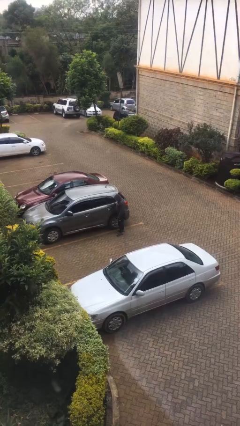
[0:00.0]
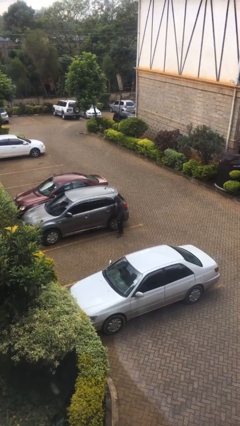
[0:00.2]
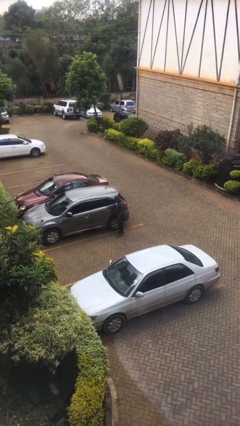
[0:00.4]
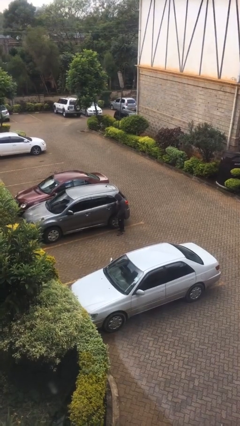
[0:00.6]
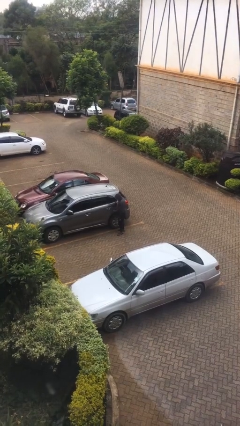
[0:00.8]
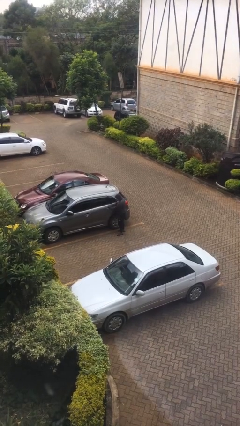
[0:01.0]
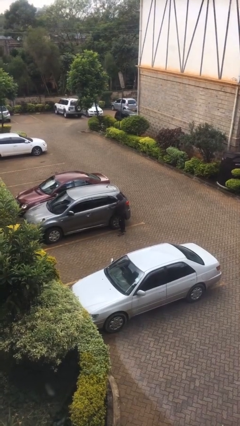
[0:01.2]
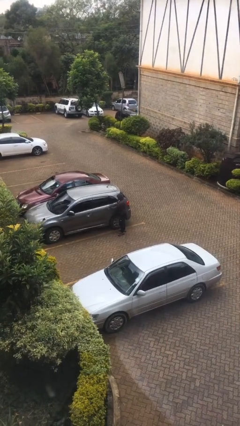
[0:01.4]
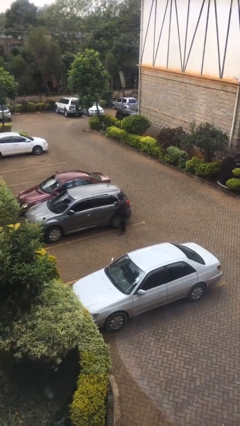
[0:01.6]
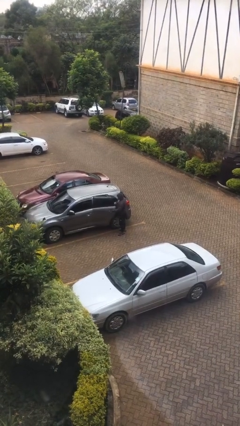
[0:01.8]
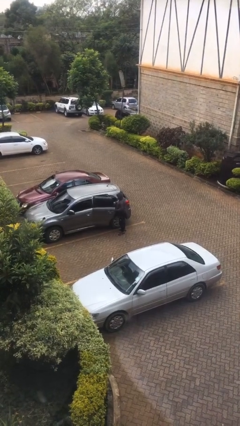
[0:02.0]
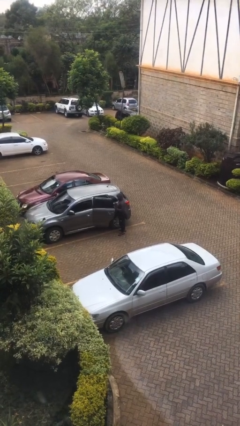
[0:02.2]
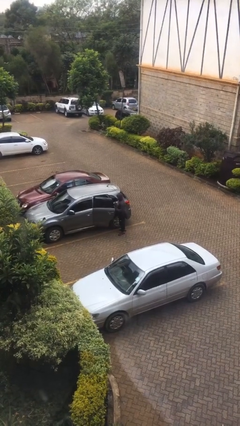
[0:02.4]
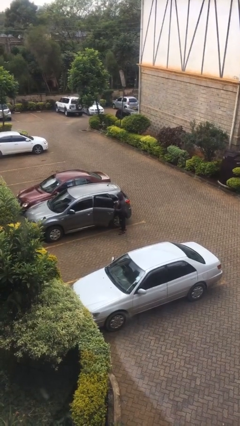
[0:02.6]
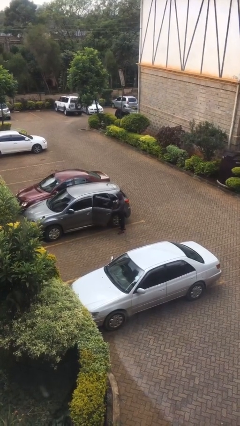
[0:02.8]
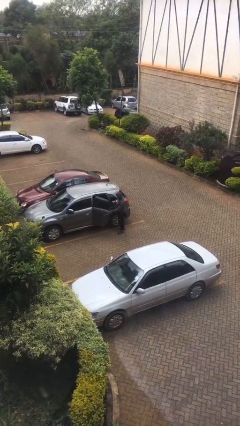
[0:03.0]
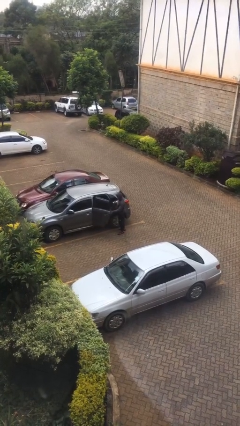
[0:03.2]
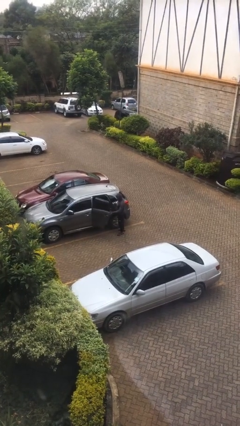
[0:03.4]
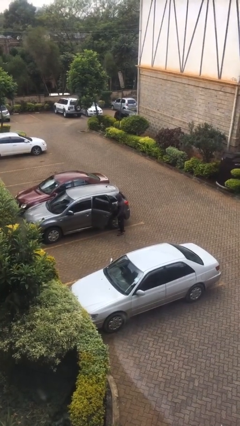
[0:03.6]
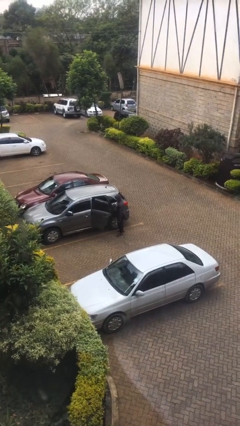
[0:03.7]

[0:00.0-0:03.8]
person opens car door

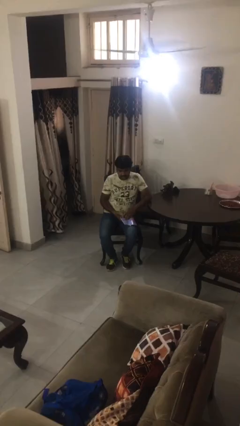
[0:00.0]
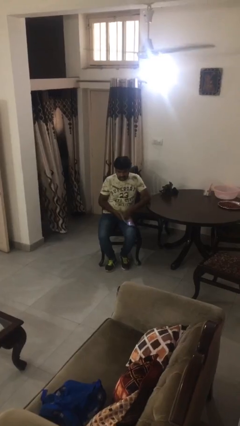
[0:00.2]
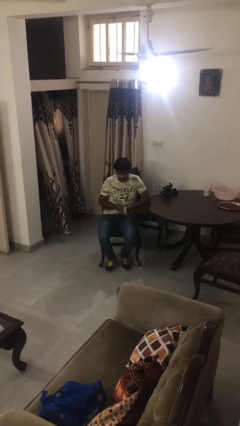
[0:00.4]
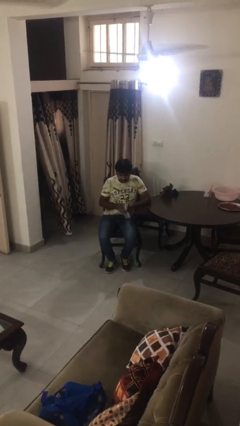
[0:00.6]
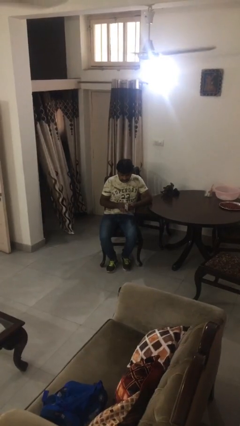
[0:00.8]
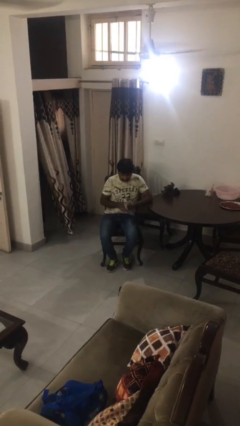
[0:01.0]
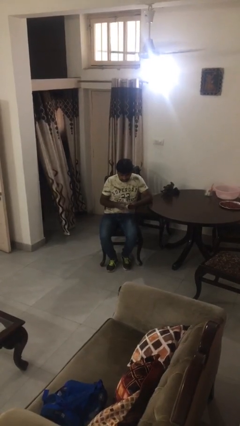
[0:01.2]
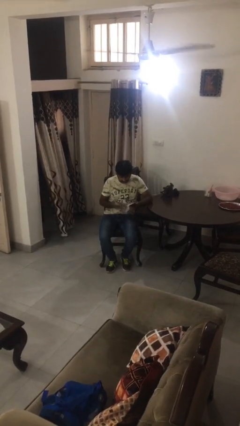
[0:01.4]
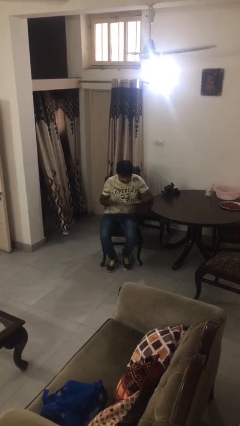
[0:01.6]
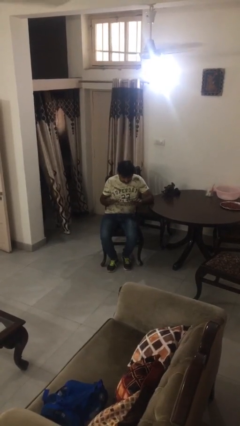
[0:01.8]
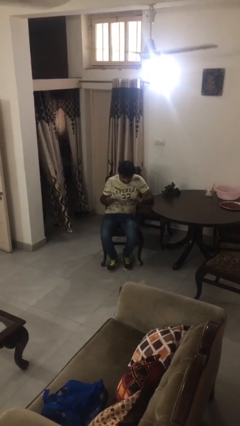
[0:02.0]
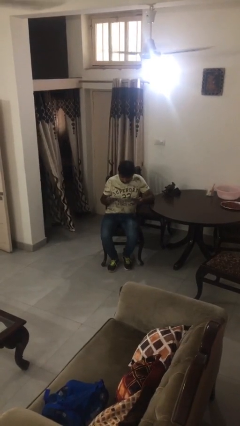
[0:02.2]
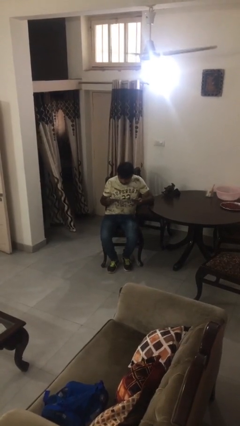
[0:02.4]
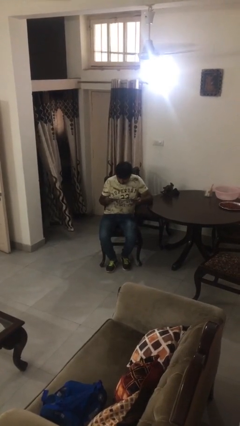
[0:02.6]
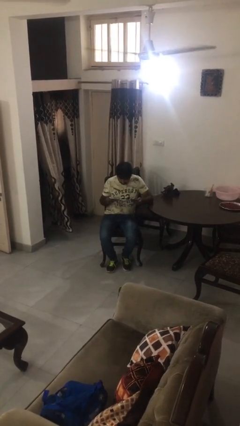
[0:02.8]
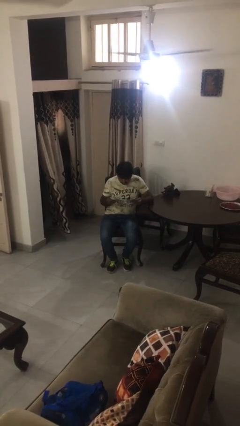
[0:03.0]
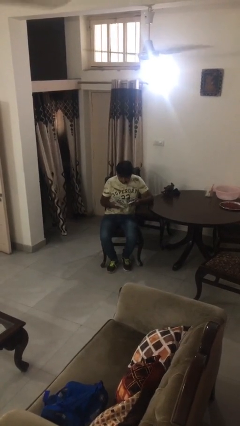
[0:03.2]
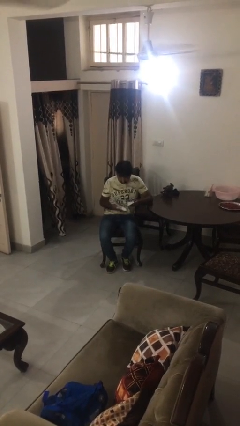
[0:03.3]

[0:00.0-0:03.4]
person reads magazine

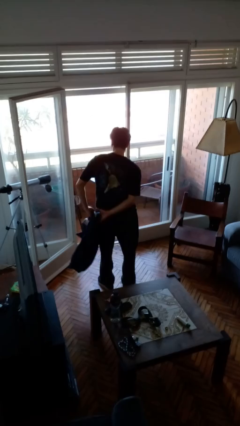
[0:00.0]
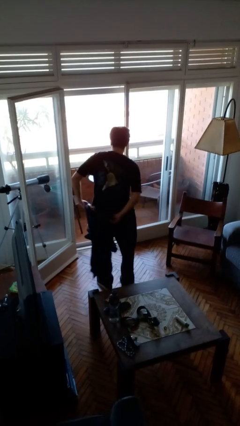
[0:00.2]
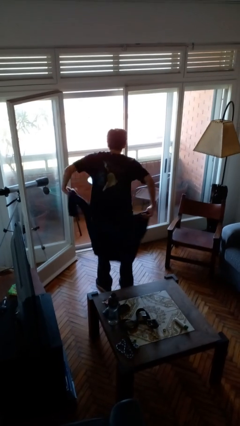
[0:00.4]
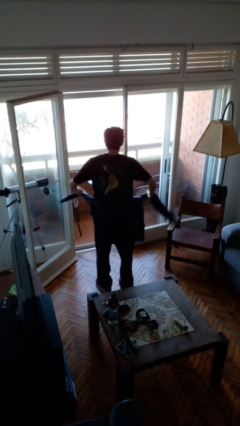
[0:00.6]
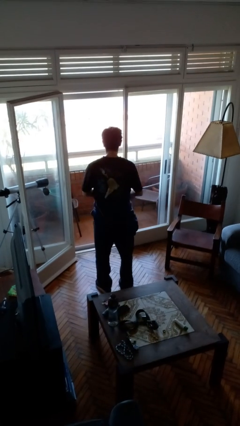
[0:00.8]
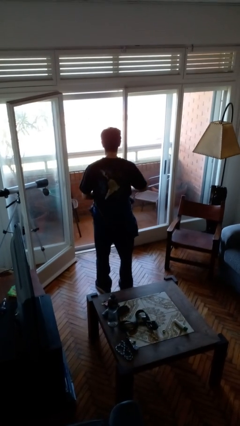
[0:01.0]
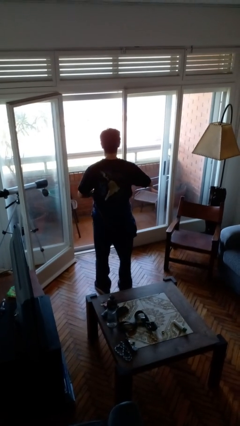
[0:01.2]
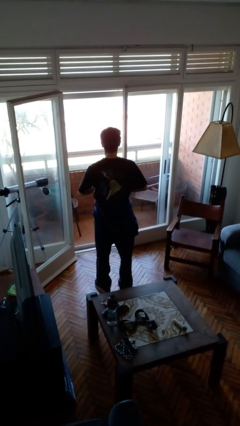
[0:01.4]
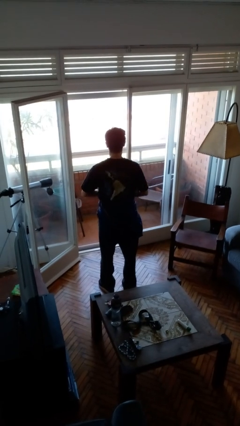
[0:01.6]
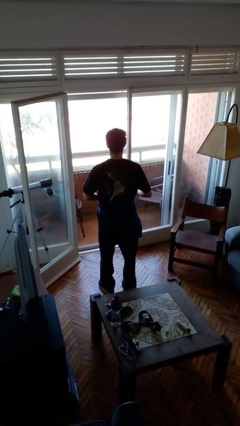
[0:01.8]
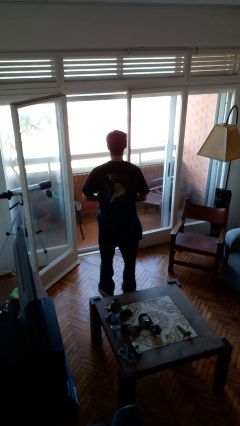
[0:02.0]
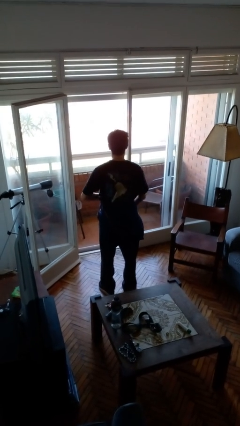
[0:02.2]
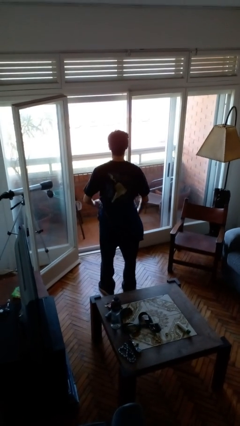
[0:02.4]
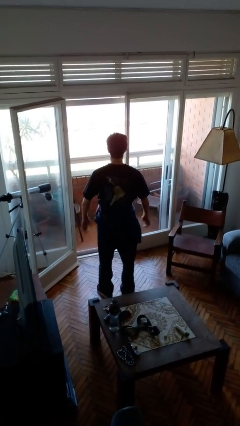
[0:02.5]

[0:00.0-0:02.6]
person ties jacket around waist

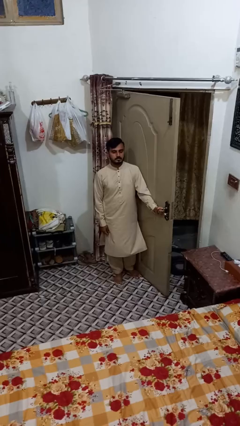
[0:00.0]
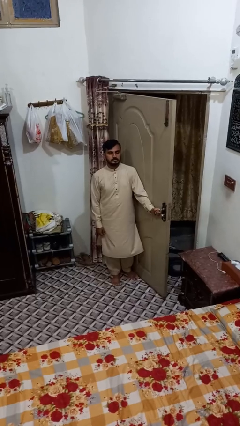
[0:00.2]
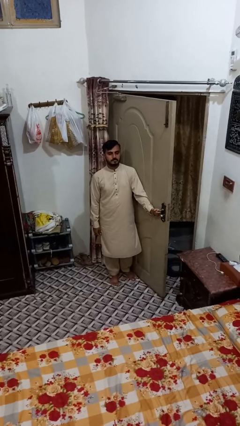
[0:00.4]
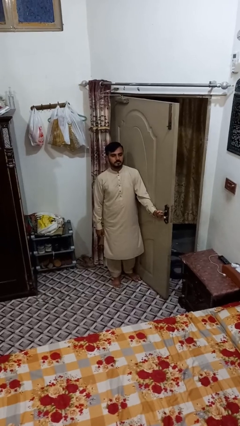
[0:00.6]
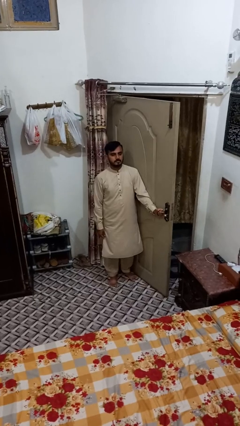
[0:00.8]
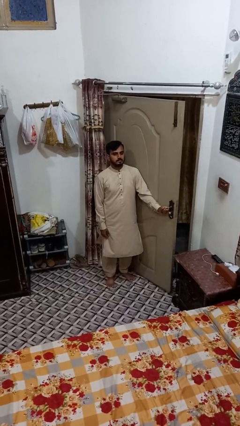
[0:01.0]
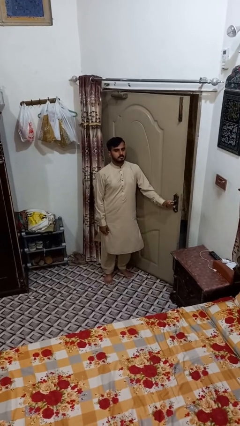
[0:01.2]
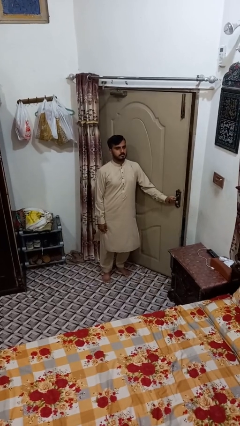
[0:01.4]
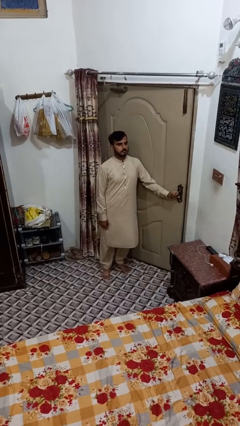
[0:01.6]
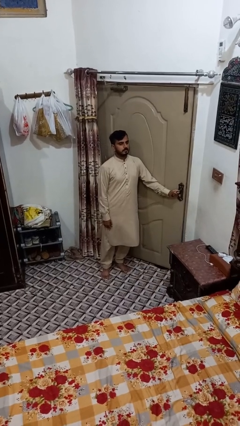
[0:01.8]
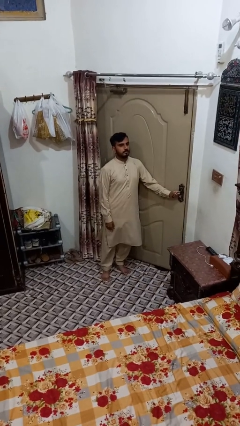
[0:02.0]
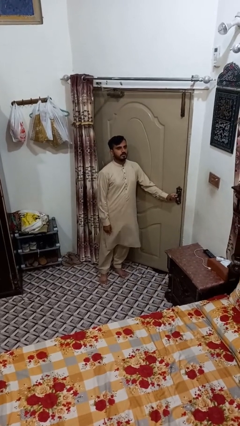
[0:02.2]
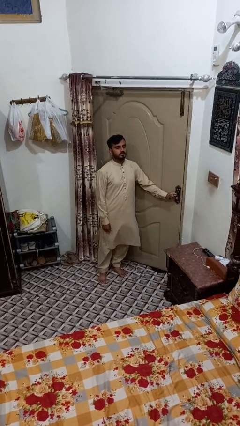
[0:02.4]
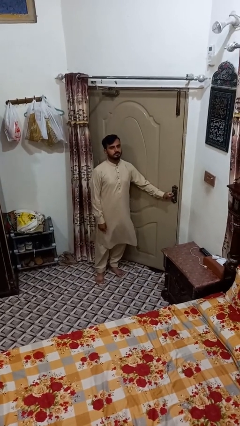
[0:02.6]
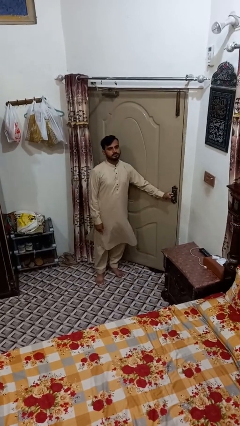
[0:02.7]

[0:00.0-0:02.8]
person closes closet door

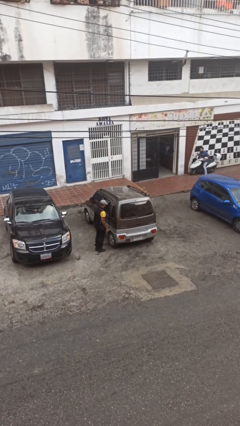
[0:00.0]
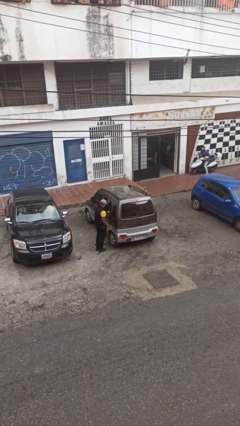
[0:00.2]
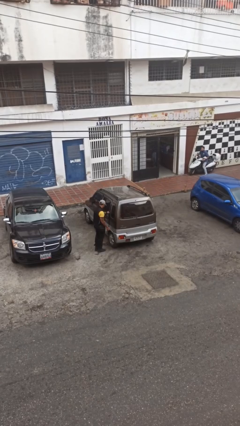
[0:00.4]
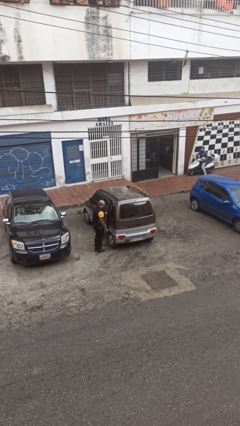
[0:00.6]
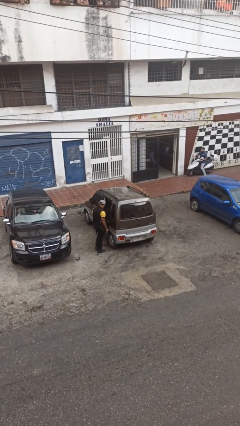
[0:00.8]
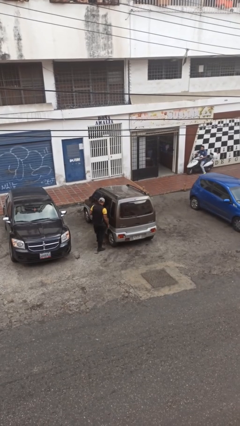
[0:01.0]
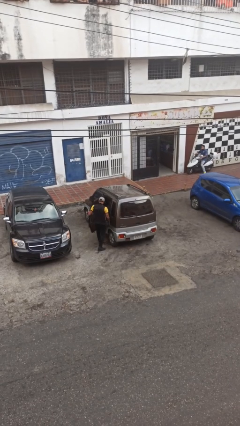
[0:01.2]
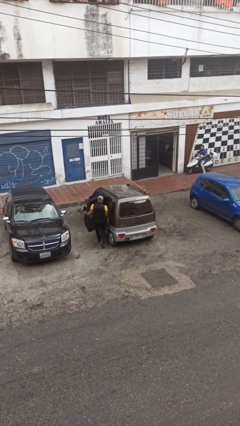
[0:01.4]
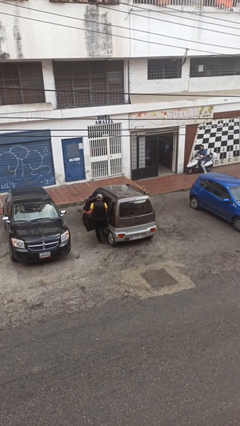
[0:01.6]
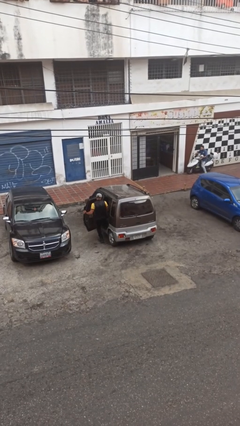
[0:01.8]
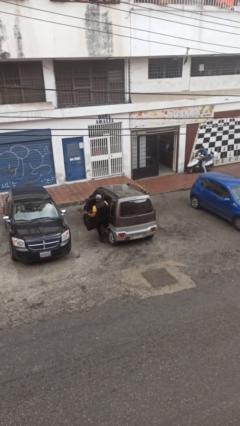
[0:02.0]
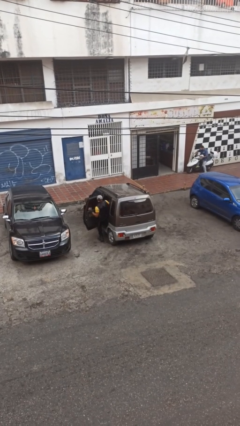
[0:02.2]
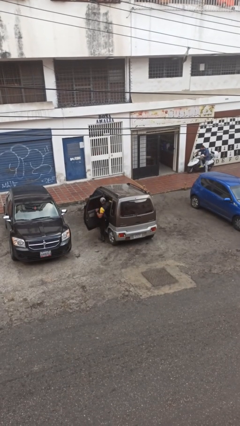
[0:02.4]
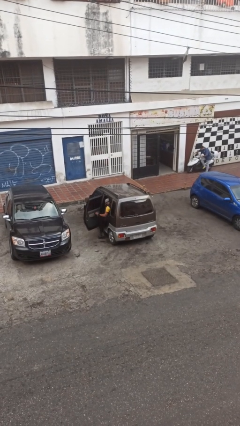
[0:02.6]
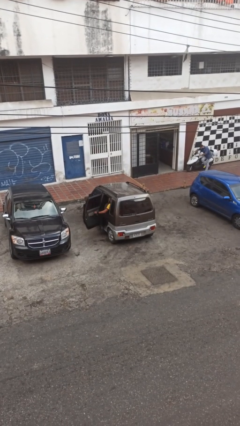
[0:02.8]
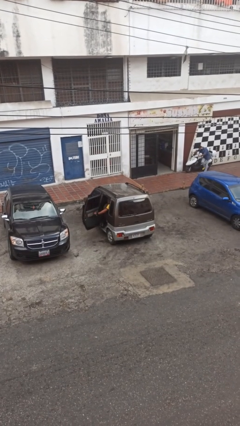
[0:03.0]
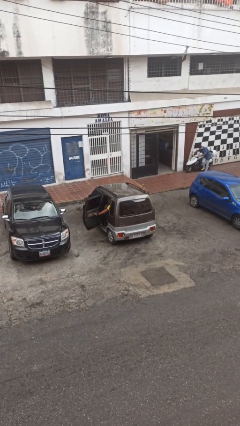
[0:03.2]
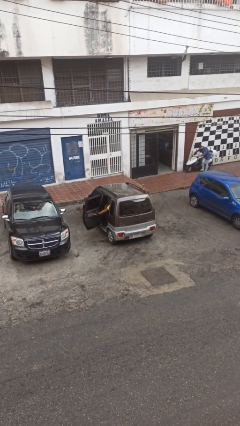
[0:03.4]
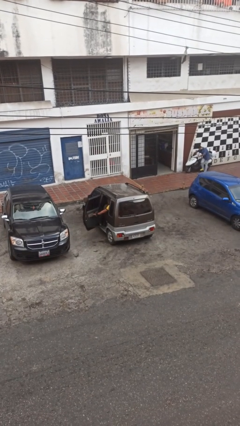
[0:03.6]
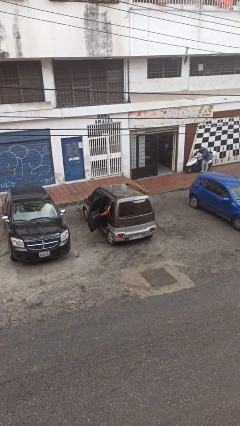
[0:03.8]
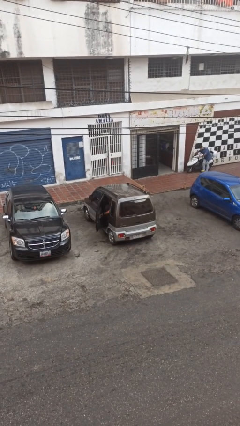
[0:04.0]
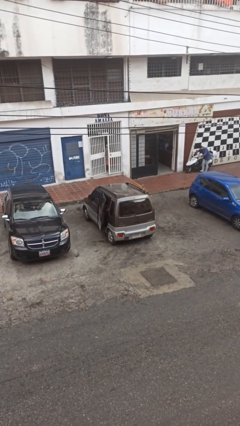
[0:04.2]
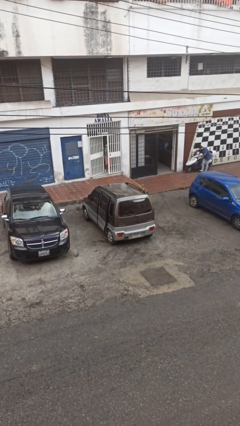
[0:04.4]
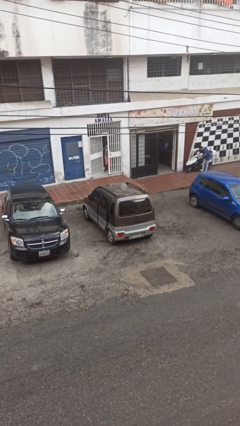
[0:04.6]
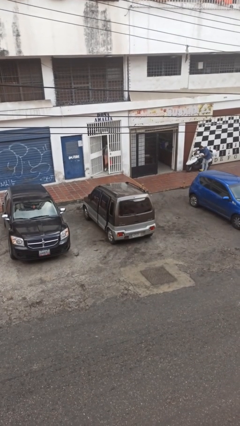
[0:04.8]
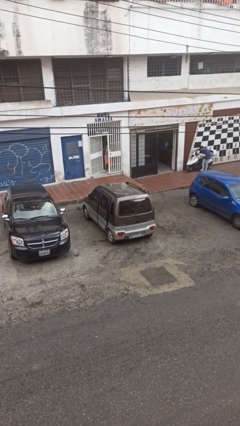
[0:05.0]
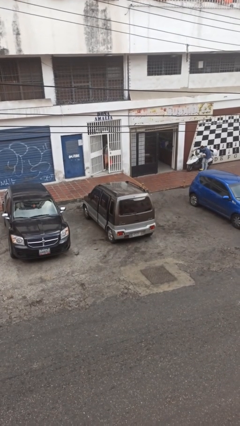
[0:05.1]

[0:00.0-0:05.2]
car picks up person
